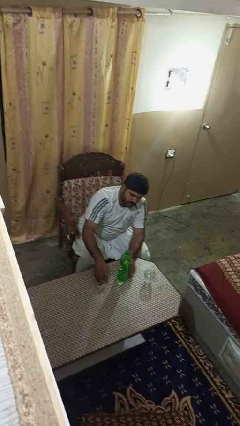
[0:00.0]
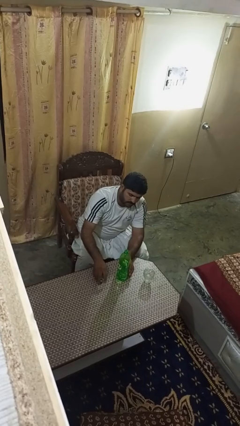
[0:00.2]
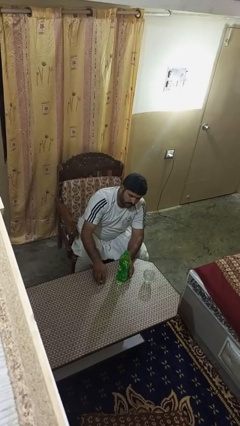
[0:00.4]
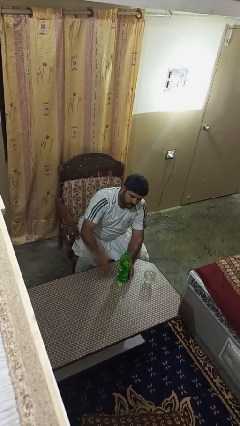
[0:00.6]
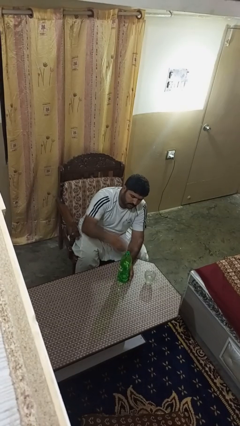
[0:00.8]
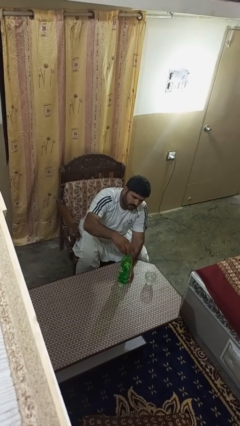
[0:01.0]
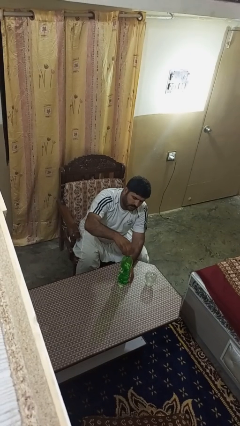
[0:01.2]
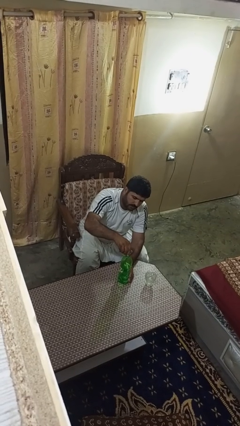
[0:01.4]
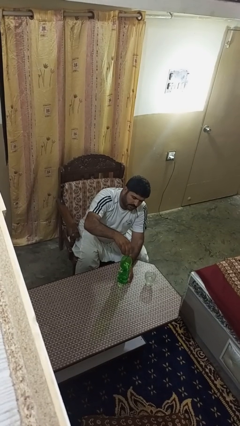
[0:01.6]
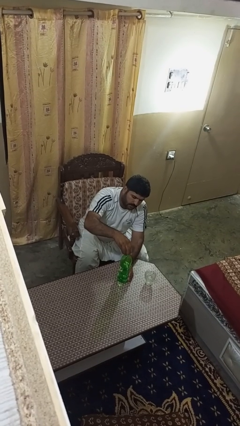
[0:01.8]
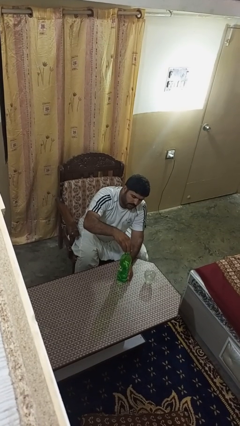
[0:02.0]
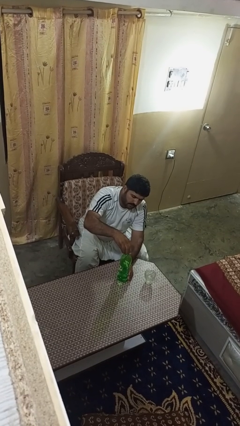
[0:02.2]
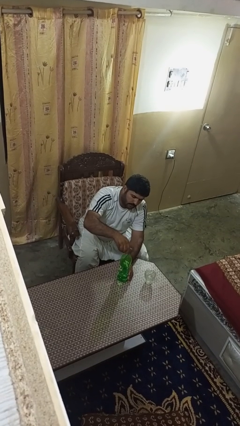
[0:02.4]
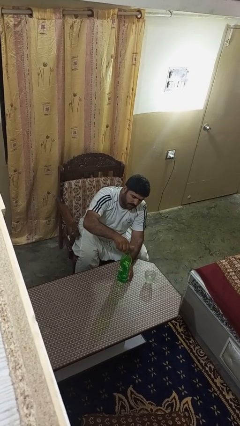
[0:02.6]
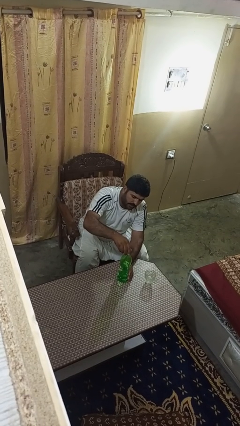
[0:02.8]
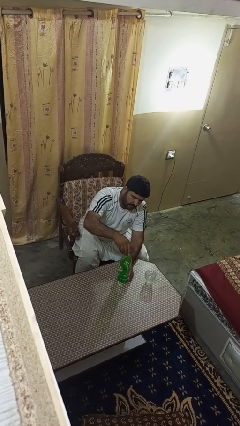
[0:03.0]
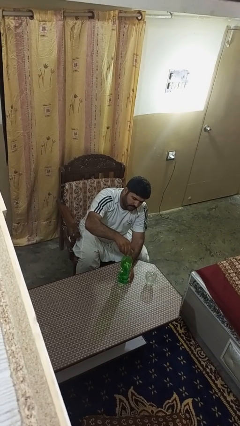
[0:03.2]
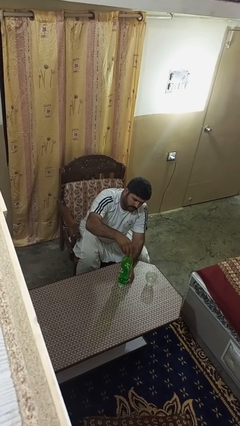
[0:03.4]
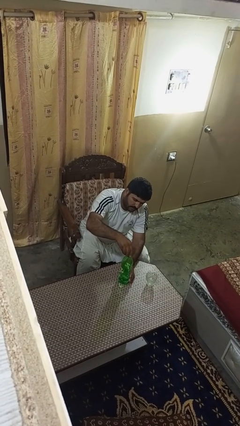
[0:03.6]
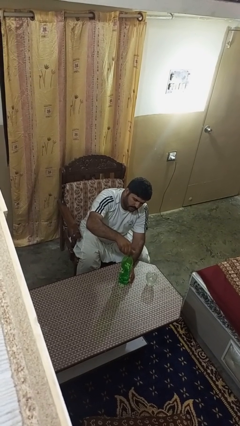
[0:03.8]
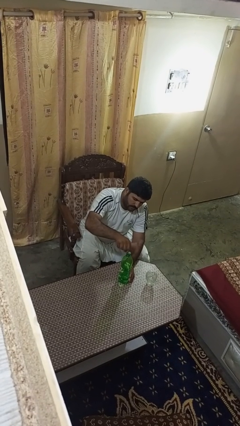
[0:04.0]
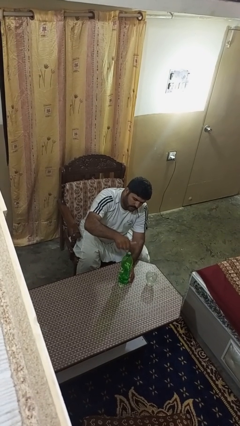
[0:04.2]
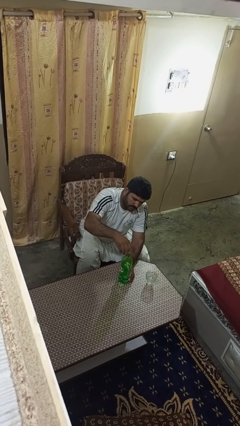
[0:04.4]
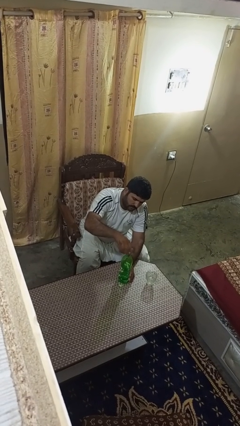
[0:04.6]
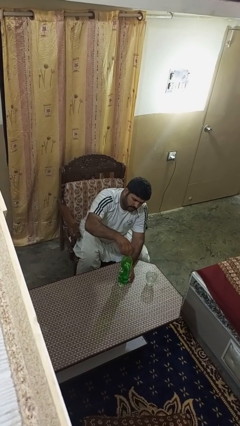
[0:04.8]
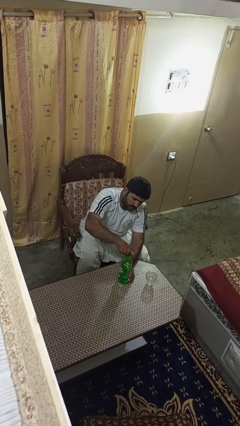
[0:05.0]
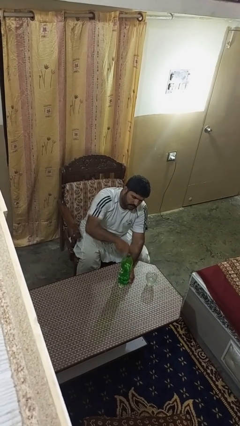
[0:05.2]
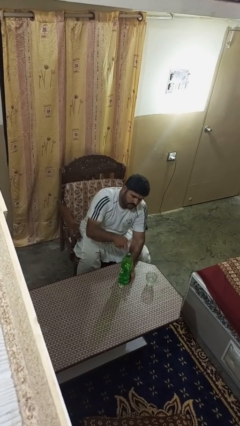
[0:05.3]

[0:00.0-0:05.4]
person screws lid to bottle

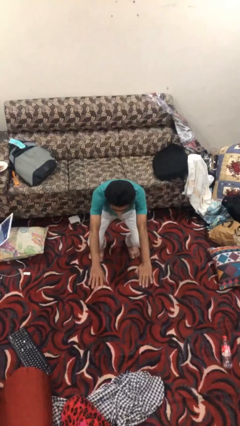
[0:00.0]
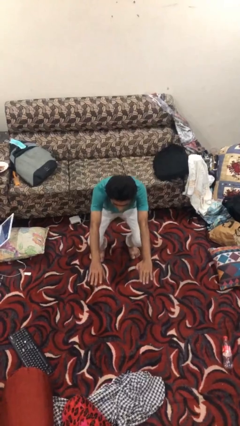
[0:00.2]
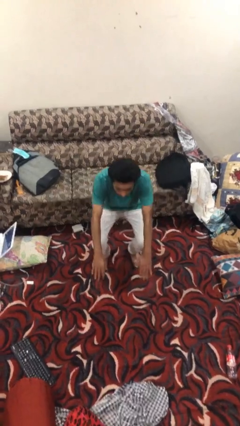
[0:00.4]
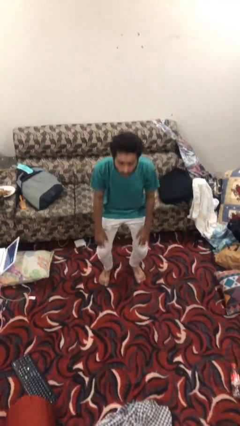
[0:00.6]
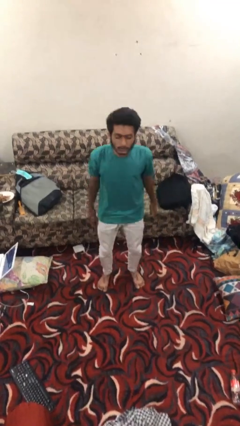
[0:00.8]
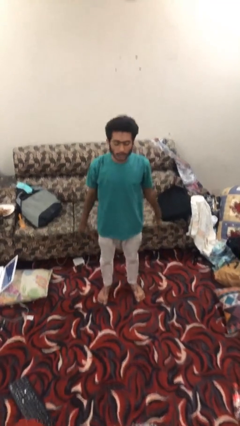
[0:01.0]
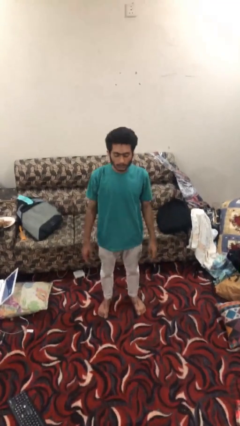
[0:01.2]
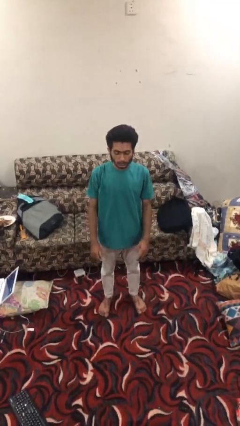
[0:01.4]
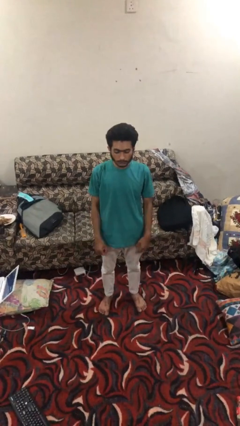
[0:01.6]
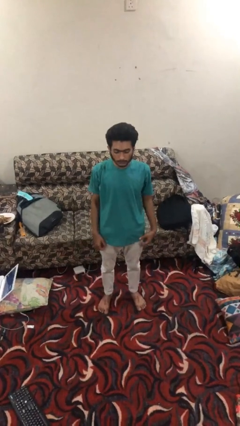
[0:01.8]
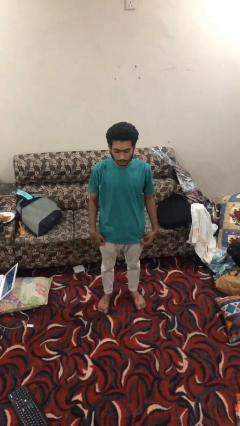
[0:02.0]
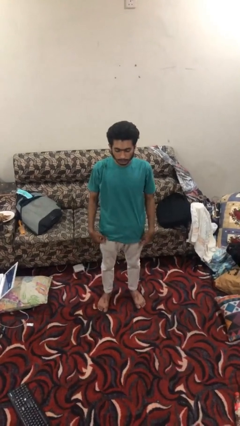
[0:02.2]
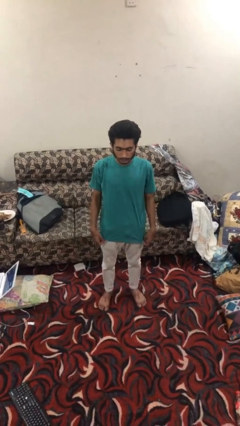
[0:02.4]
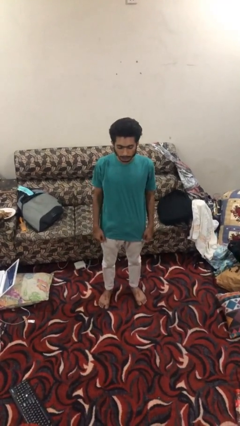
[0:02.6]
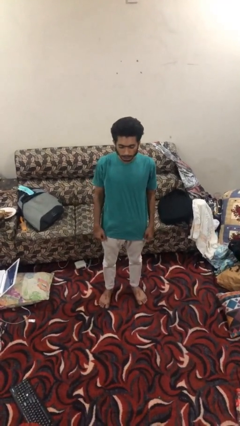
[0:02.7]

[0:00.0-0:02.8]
person stands up

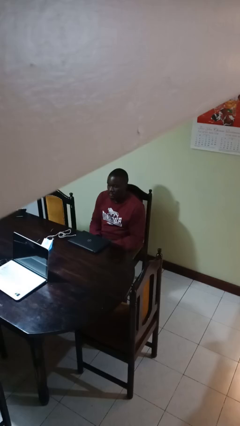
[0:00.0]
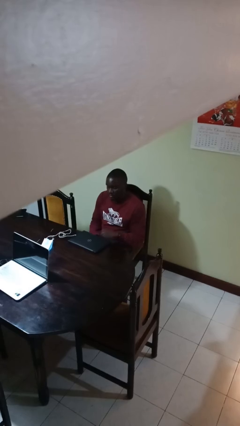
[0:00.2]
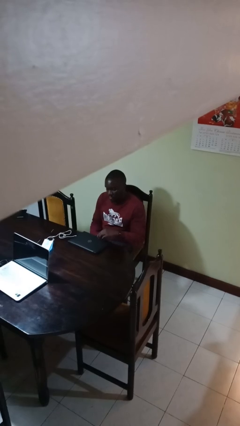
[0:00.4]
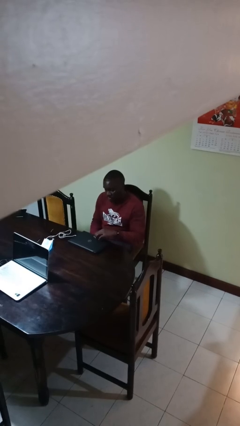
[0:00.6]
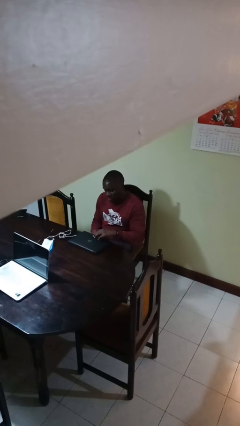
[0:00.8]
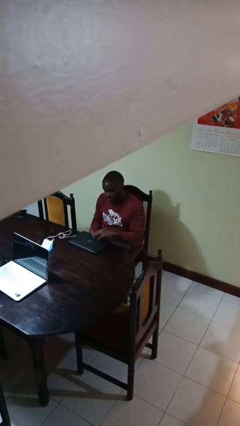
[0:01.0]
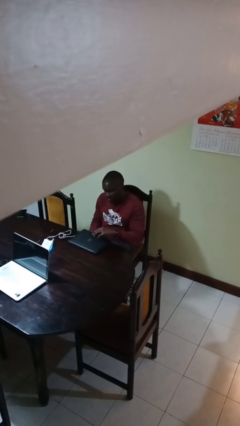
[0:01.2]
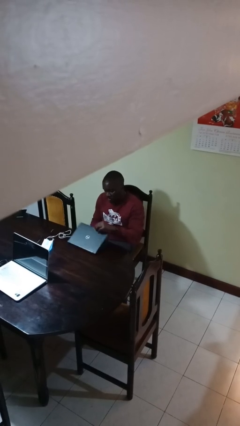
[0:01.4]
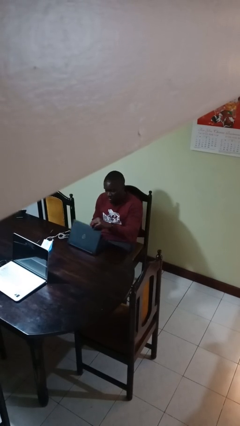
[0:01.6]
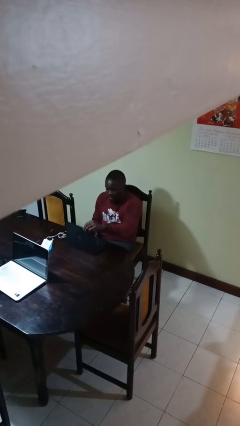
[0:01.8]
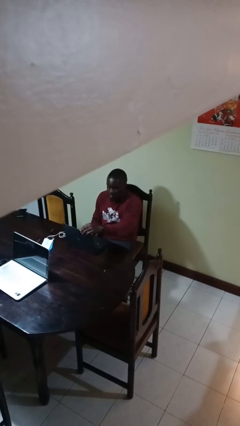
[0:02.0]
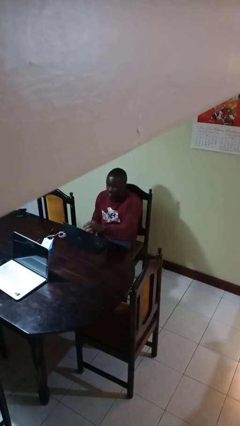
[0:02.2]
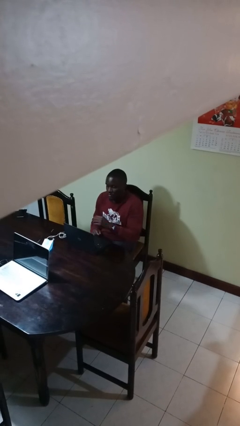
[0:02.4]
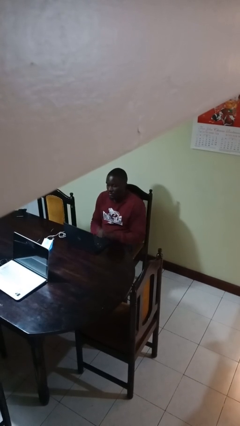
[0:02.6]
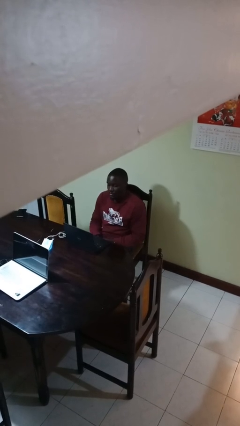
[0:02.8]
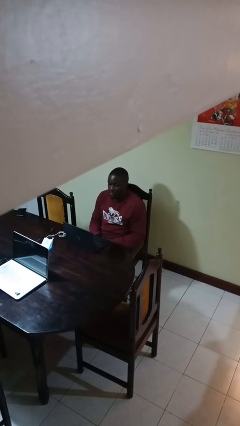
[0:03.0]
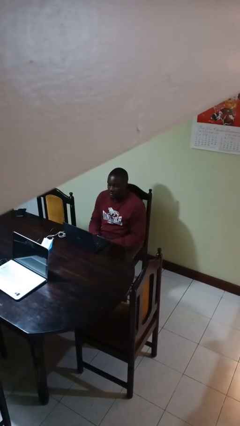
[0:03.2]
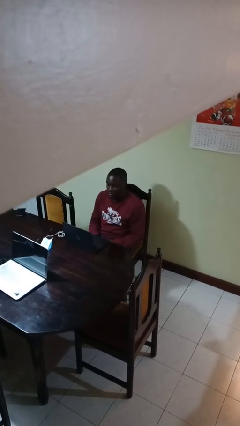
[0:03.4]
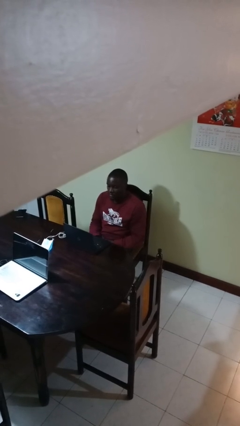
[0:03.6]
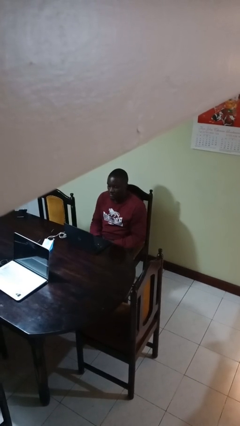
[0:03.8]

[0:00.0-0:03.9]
person opens laptop

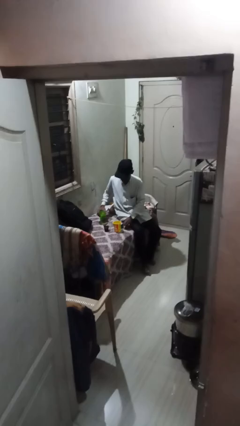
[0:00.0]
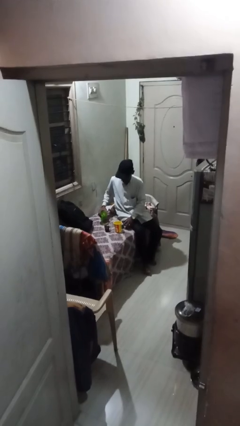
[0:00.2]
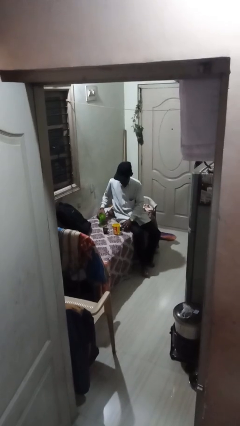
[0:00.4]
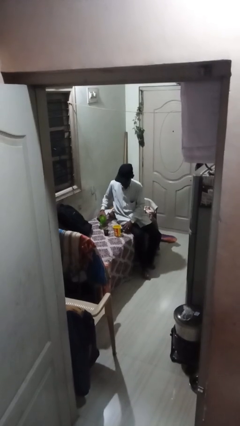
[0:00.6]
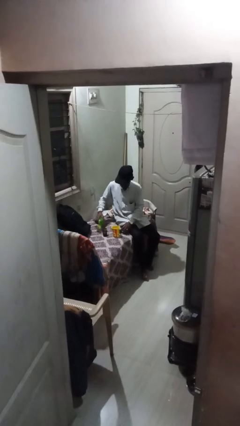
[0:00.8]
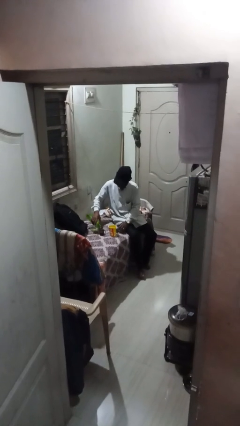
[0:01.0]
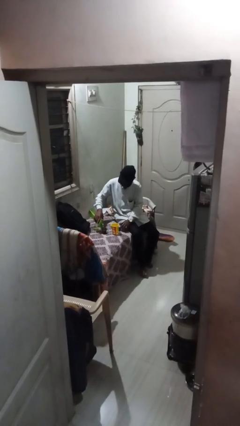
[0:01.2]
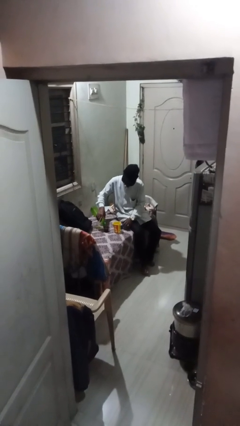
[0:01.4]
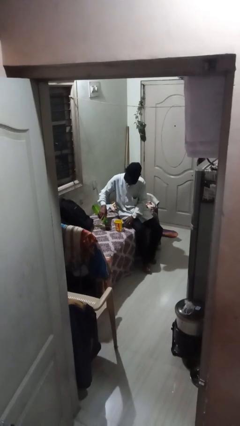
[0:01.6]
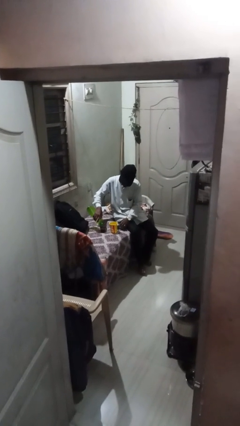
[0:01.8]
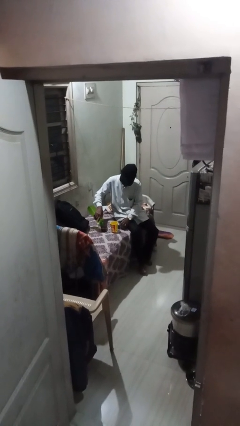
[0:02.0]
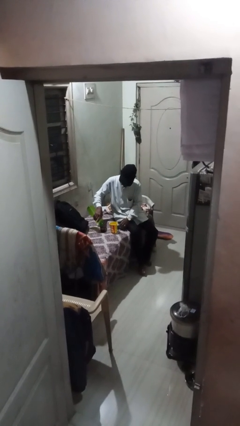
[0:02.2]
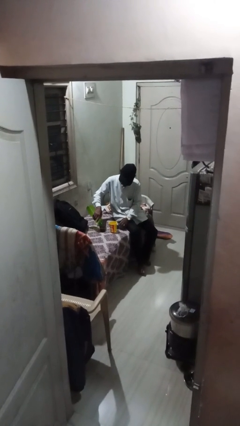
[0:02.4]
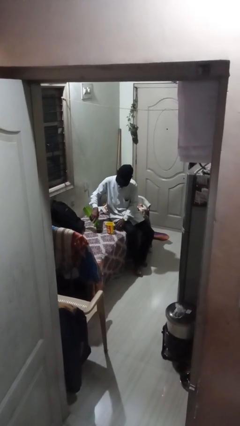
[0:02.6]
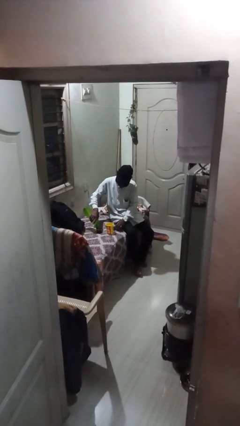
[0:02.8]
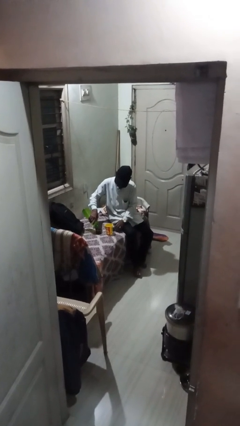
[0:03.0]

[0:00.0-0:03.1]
person pours liquid into cup

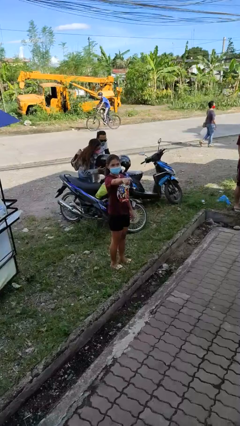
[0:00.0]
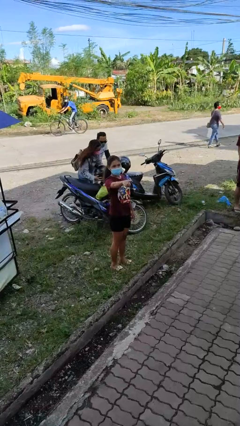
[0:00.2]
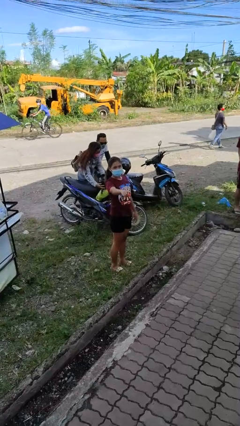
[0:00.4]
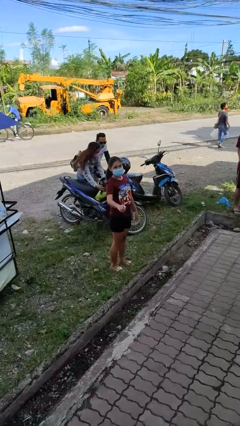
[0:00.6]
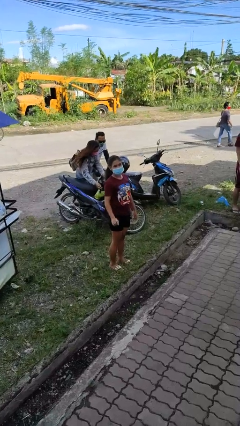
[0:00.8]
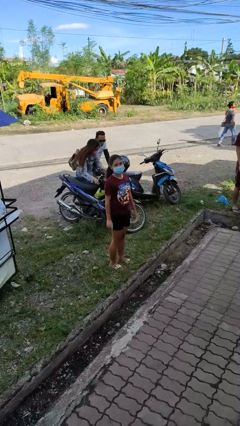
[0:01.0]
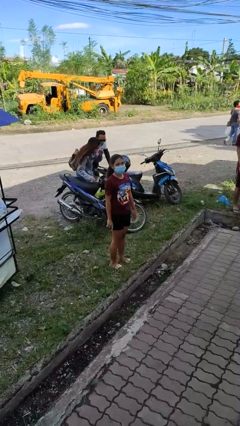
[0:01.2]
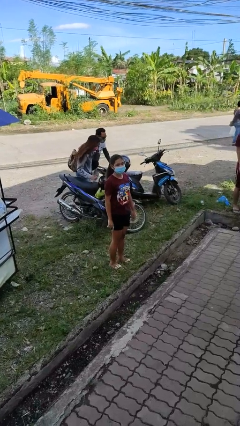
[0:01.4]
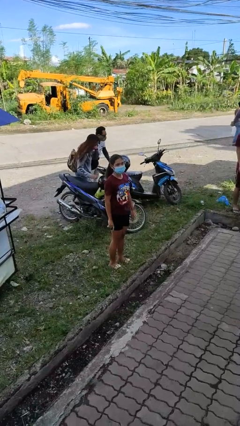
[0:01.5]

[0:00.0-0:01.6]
person points at person

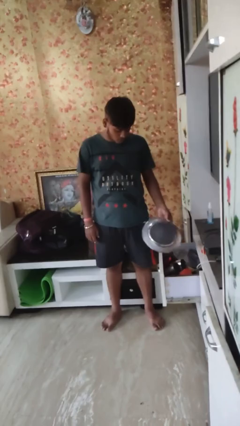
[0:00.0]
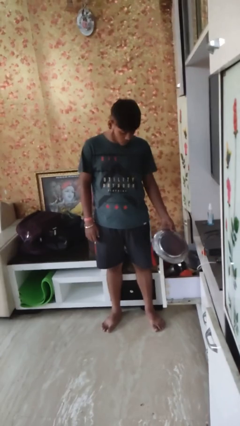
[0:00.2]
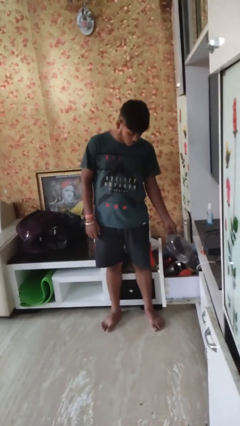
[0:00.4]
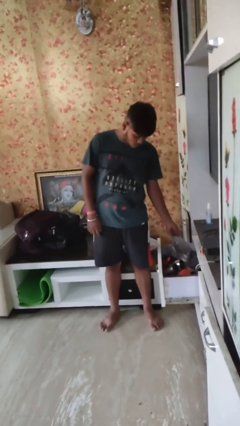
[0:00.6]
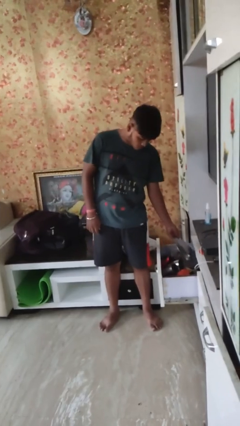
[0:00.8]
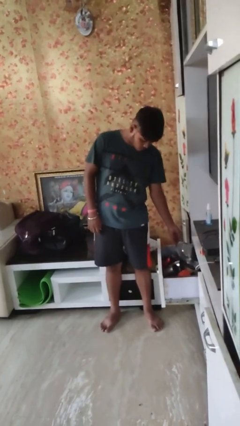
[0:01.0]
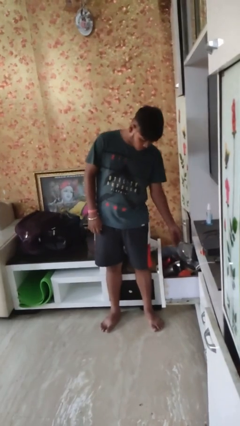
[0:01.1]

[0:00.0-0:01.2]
person puts object into kitchen drawer
